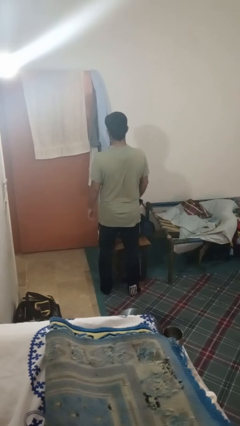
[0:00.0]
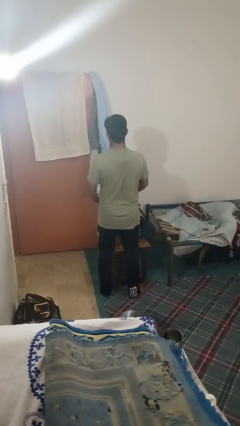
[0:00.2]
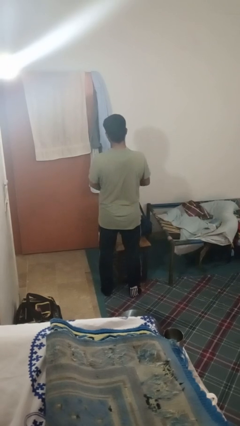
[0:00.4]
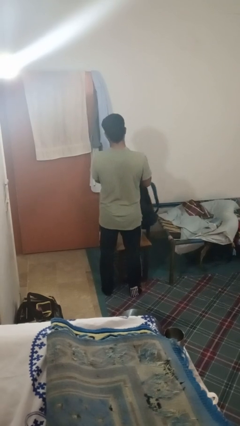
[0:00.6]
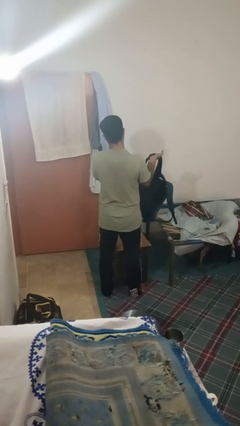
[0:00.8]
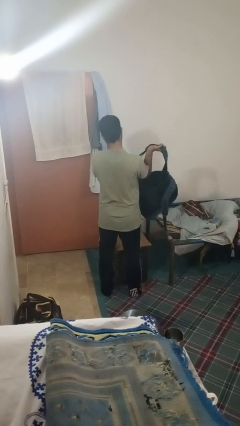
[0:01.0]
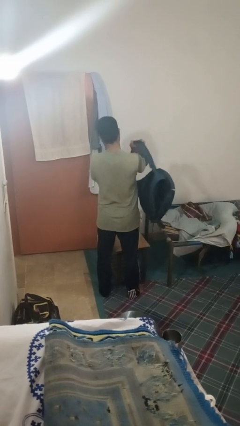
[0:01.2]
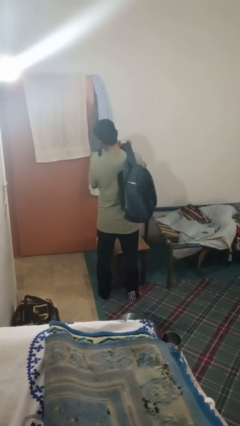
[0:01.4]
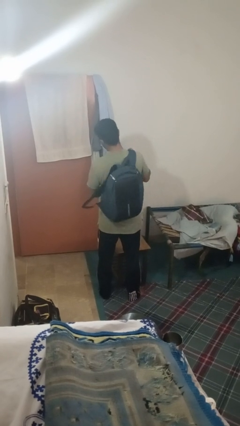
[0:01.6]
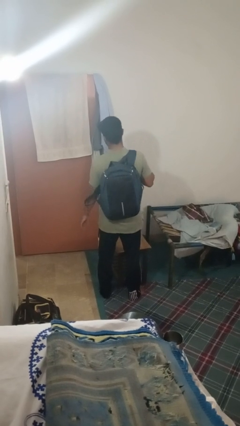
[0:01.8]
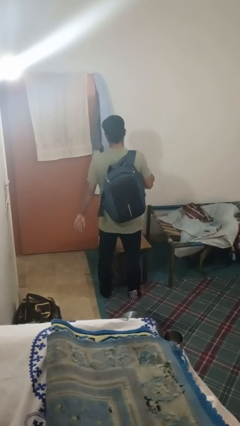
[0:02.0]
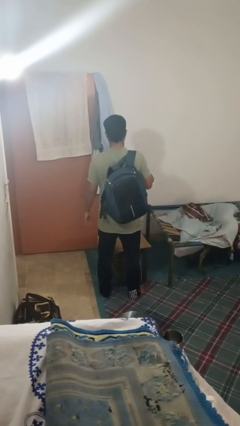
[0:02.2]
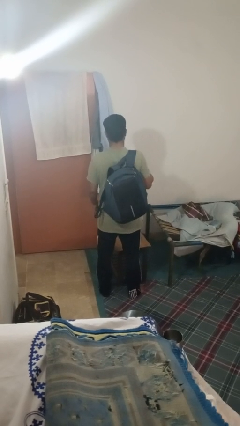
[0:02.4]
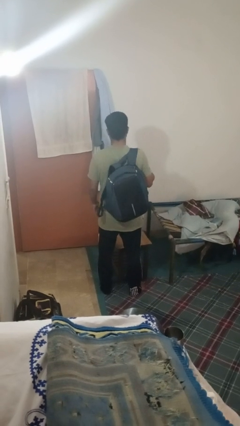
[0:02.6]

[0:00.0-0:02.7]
person puts on backpack

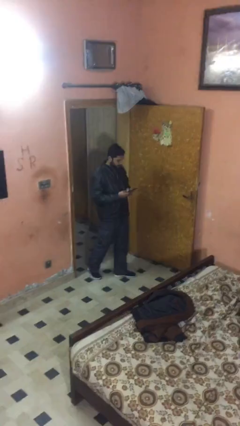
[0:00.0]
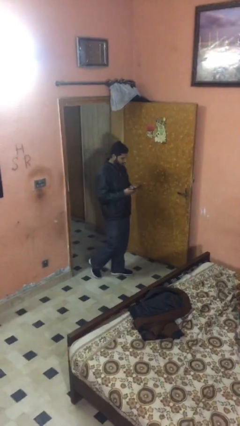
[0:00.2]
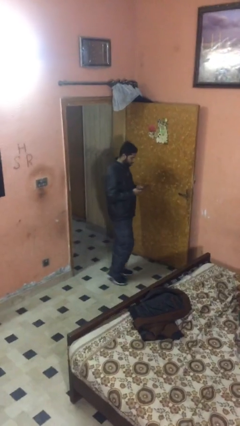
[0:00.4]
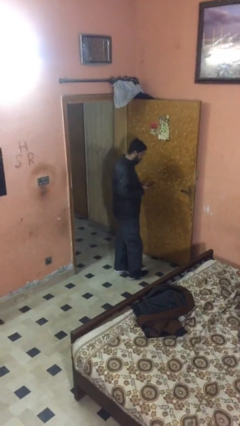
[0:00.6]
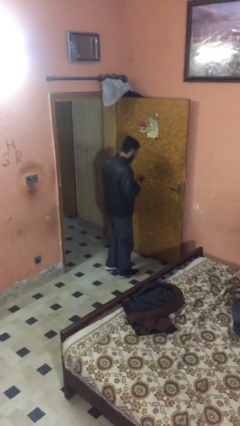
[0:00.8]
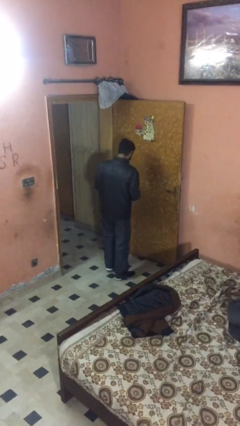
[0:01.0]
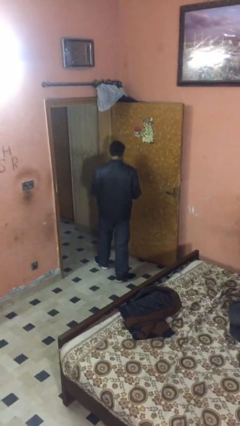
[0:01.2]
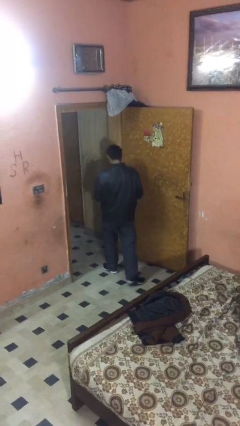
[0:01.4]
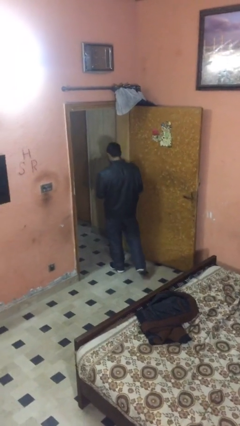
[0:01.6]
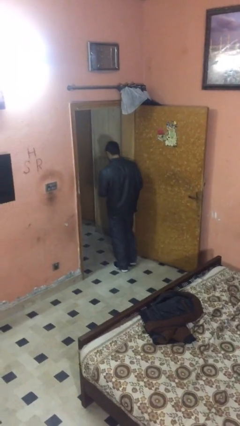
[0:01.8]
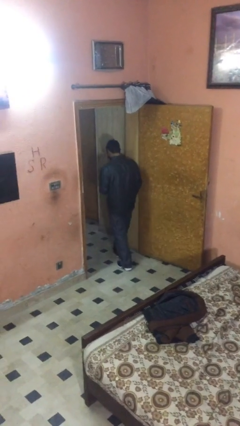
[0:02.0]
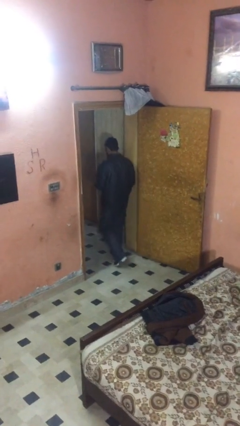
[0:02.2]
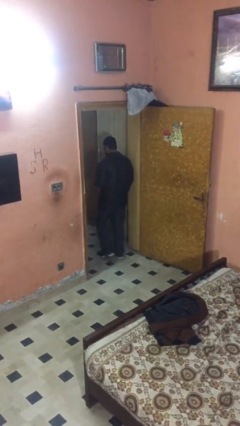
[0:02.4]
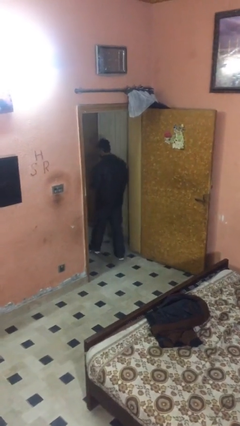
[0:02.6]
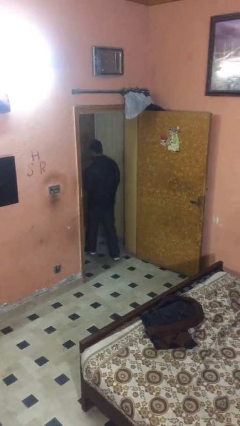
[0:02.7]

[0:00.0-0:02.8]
person exits scene through structure

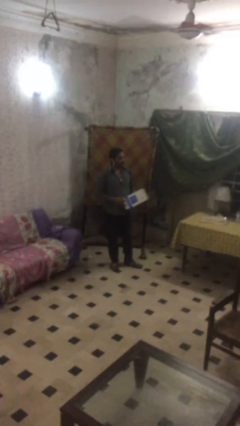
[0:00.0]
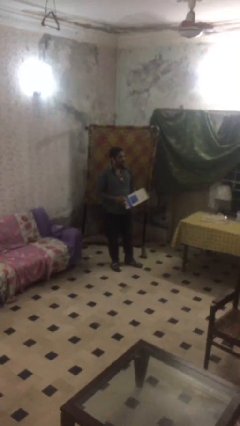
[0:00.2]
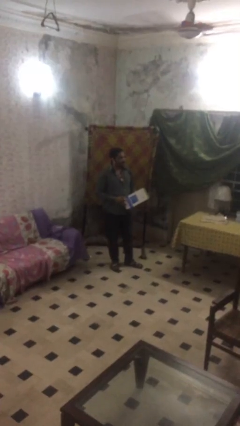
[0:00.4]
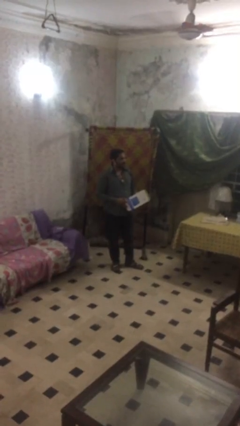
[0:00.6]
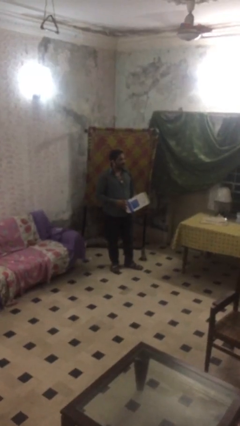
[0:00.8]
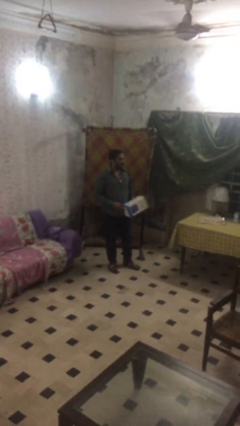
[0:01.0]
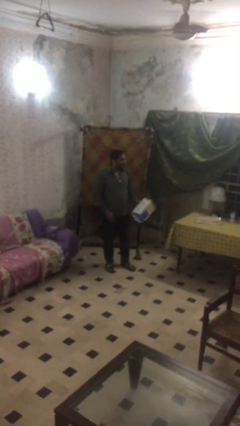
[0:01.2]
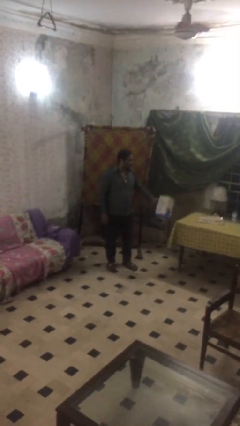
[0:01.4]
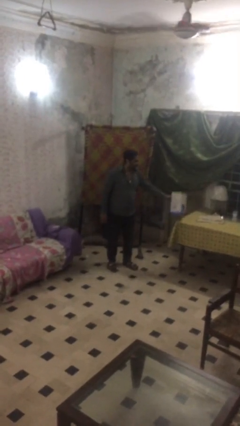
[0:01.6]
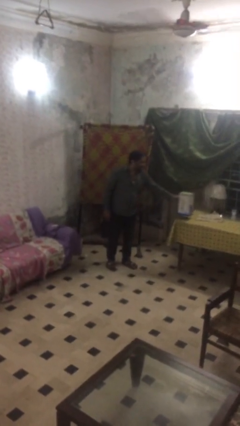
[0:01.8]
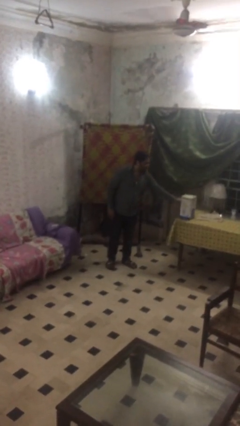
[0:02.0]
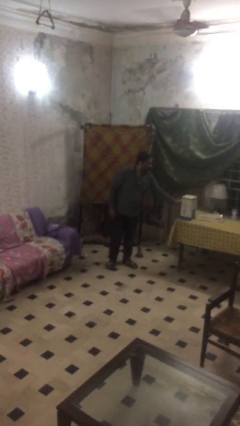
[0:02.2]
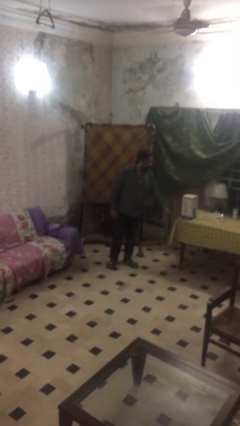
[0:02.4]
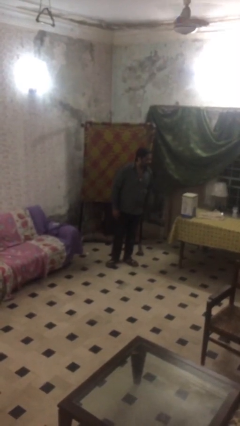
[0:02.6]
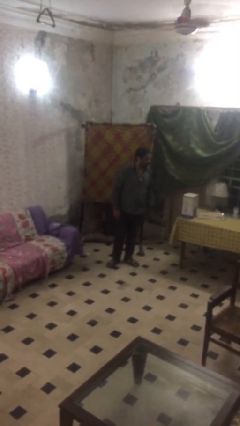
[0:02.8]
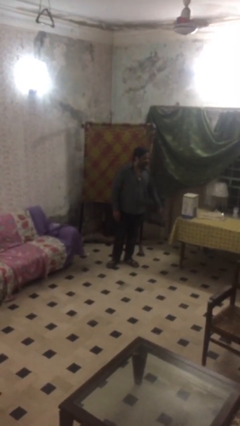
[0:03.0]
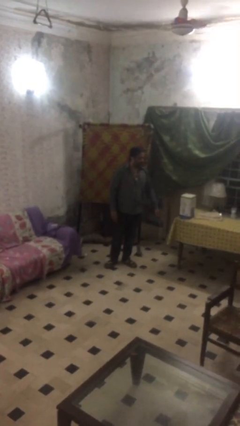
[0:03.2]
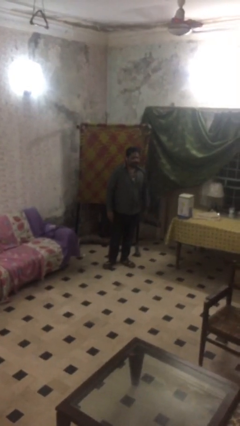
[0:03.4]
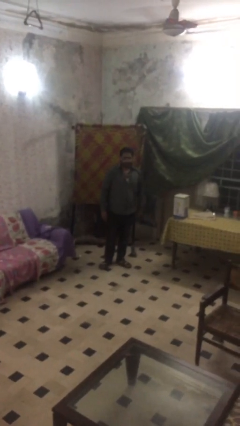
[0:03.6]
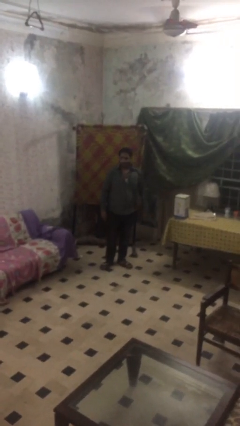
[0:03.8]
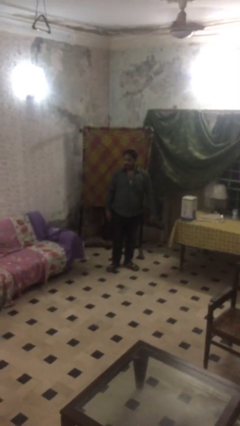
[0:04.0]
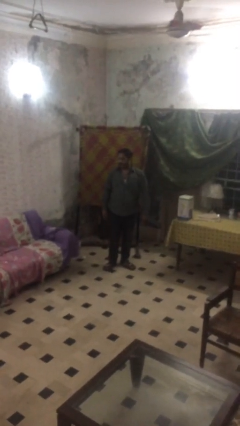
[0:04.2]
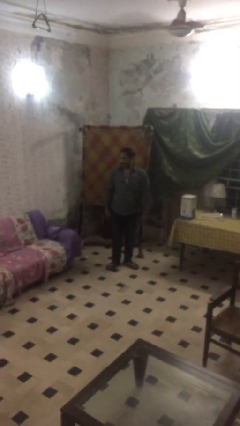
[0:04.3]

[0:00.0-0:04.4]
person puts down object on table

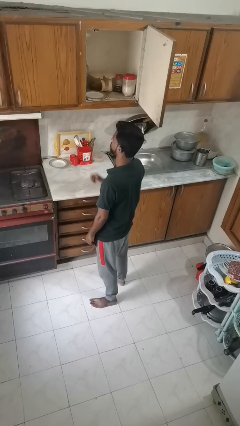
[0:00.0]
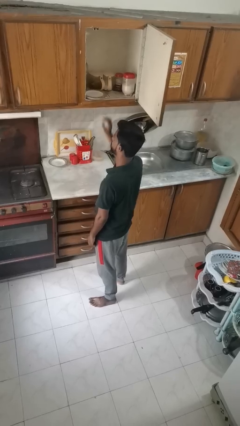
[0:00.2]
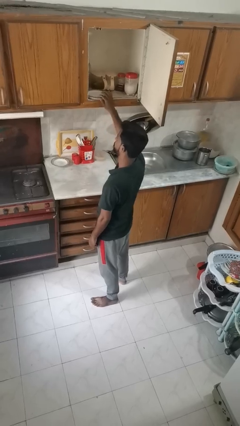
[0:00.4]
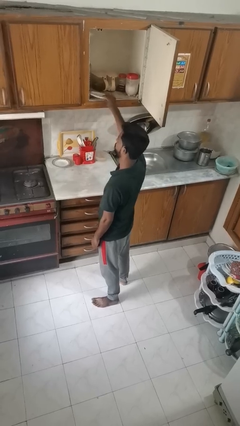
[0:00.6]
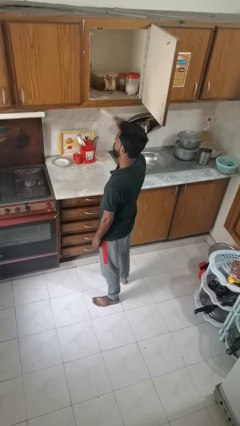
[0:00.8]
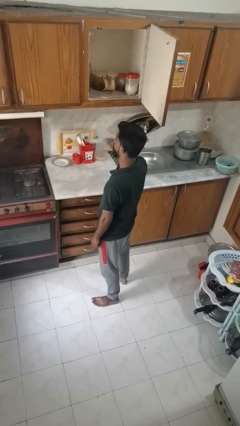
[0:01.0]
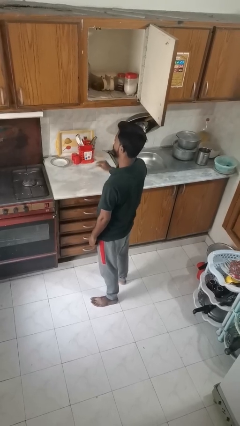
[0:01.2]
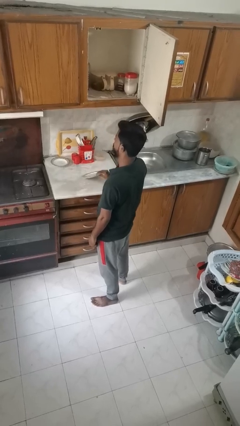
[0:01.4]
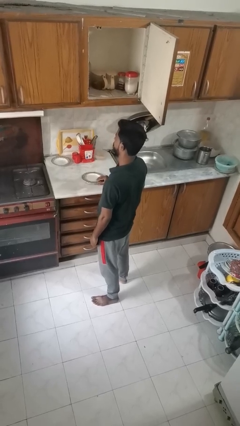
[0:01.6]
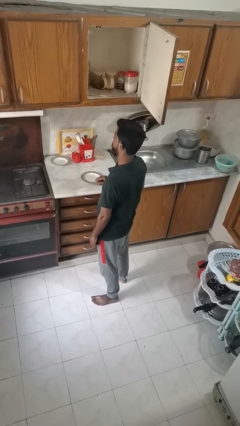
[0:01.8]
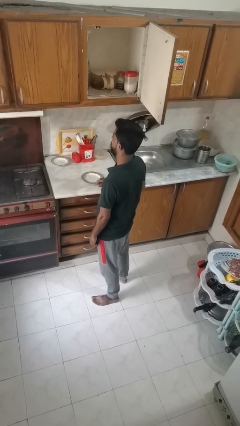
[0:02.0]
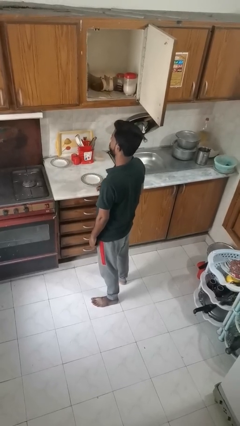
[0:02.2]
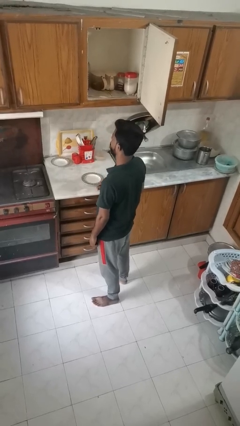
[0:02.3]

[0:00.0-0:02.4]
person takes object from cabinet

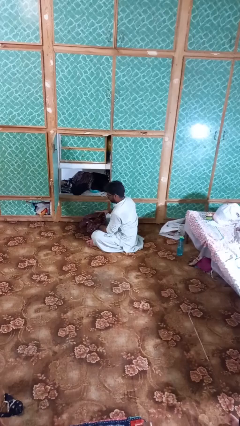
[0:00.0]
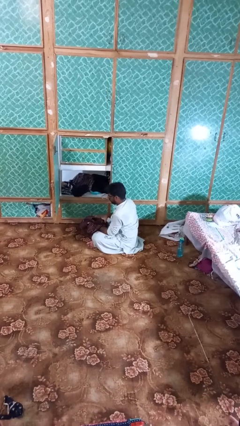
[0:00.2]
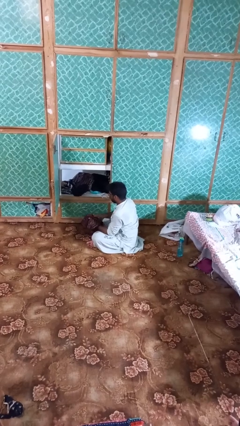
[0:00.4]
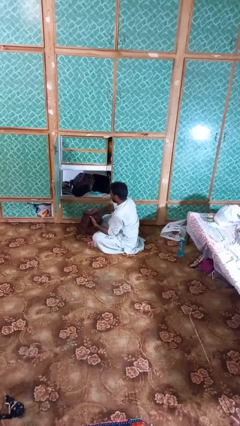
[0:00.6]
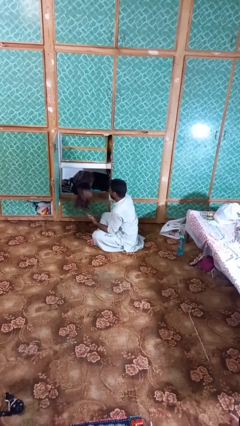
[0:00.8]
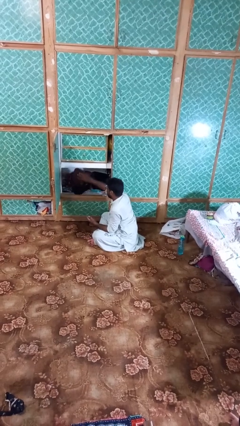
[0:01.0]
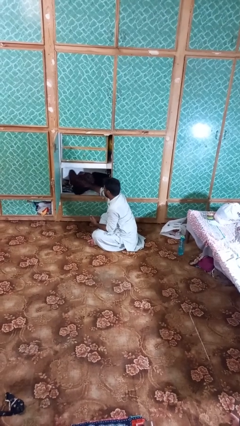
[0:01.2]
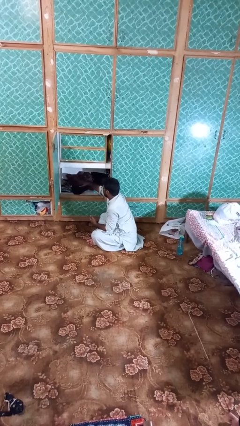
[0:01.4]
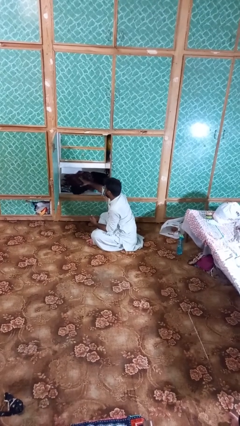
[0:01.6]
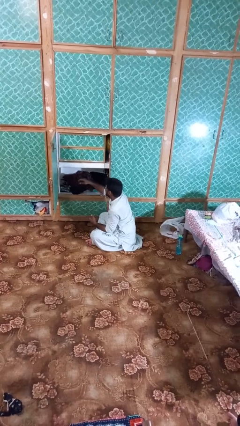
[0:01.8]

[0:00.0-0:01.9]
person puts clothes into dresser

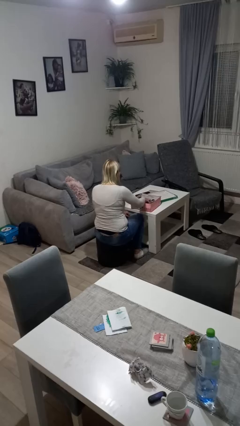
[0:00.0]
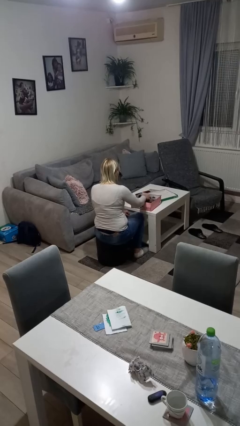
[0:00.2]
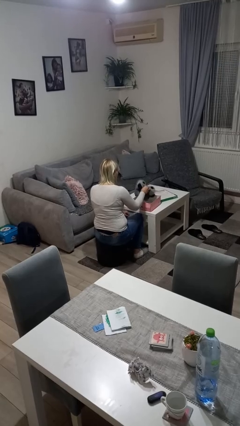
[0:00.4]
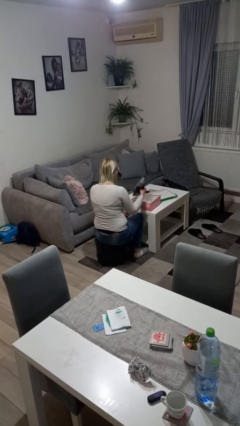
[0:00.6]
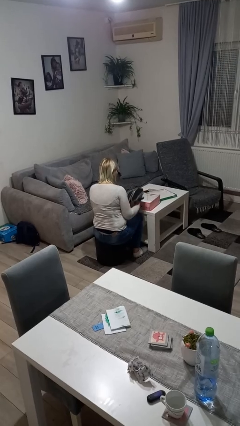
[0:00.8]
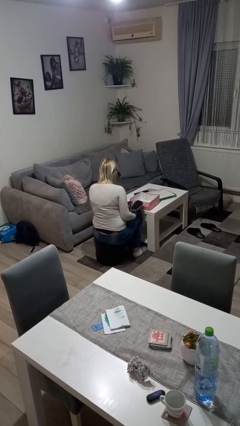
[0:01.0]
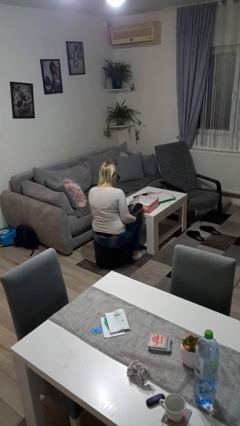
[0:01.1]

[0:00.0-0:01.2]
person takes object from box

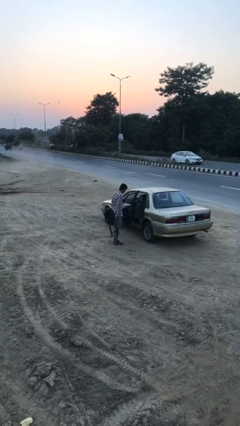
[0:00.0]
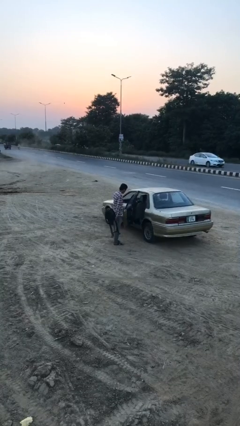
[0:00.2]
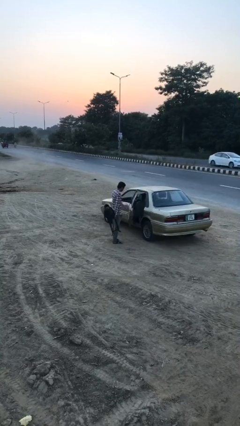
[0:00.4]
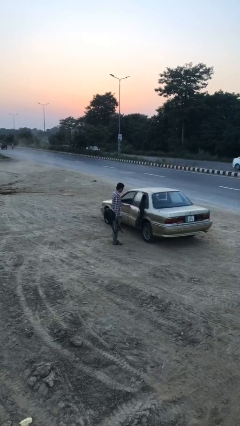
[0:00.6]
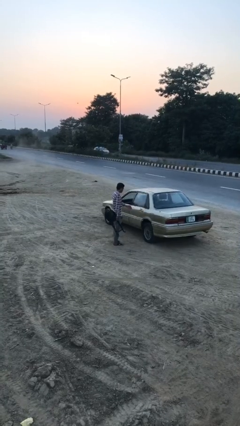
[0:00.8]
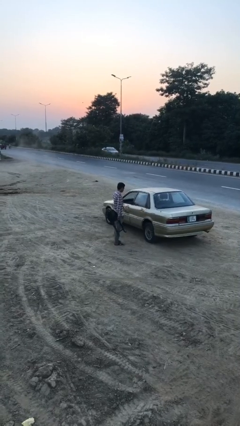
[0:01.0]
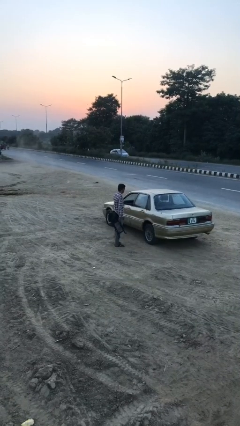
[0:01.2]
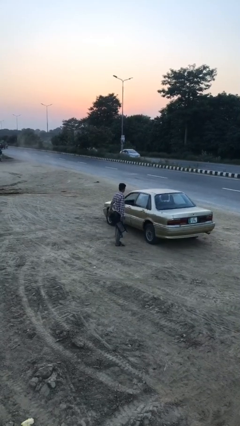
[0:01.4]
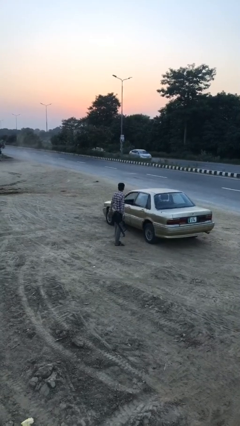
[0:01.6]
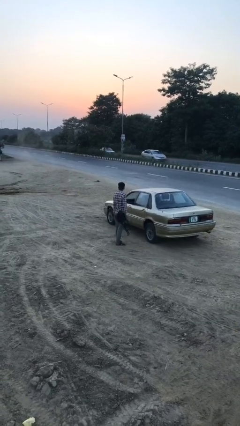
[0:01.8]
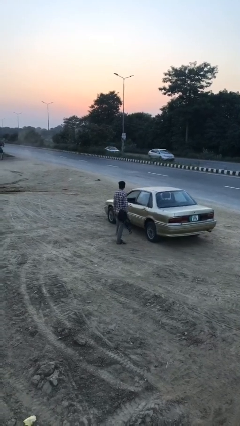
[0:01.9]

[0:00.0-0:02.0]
person closes car door
